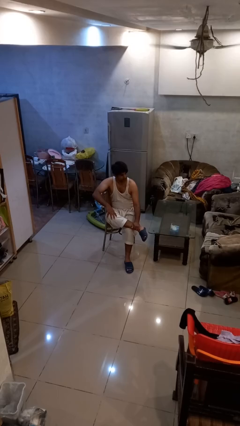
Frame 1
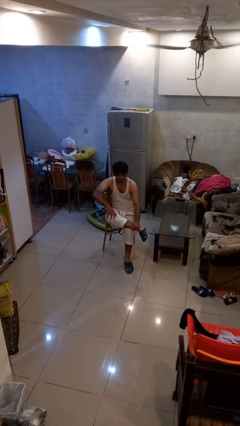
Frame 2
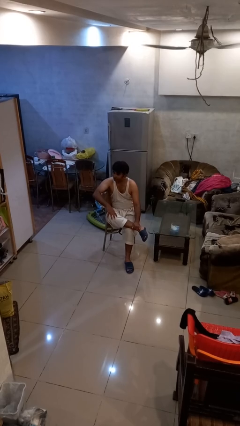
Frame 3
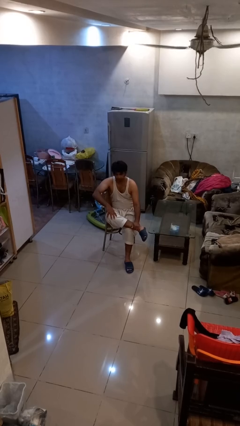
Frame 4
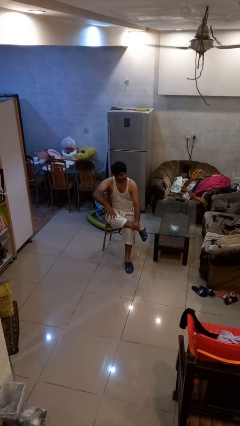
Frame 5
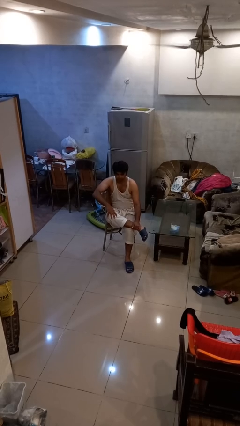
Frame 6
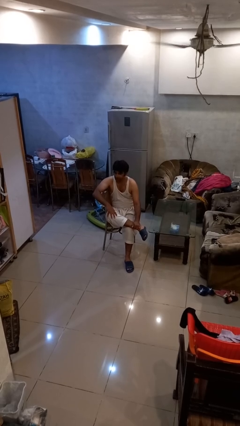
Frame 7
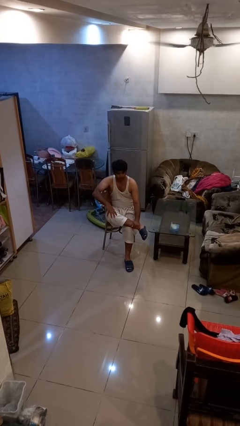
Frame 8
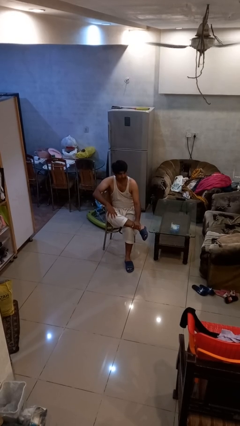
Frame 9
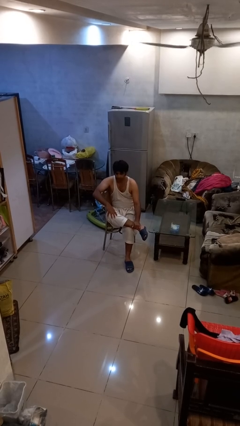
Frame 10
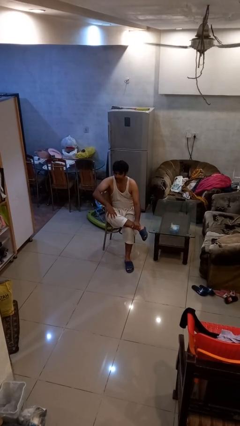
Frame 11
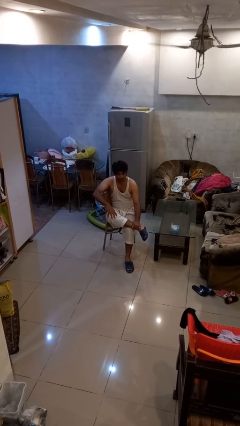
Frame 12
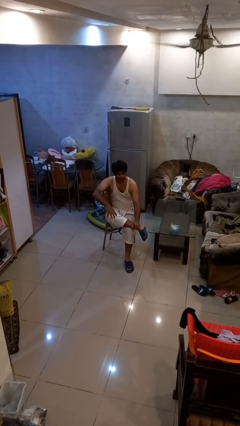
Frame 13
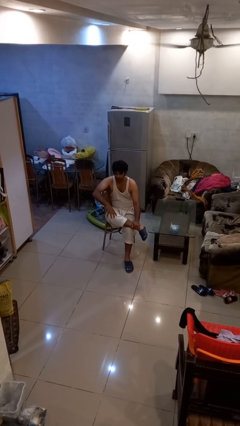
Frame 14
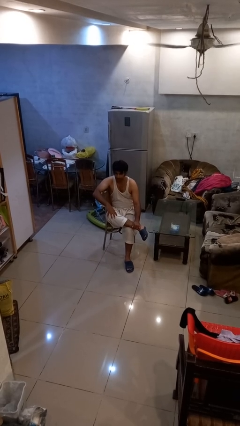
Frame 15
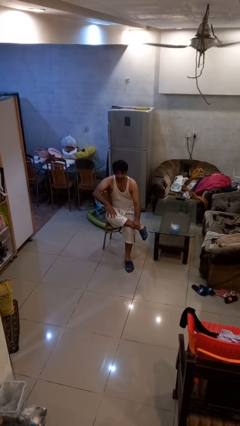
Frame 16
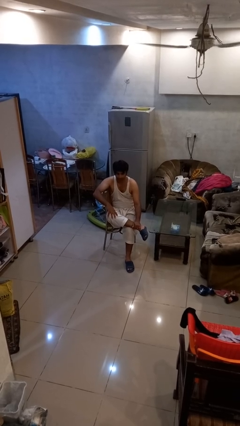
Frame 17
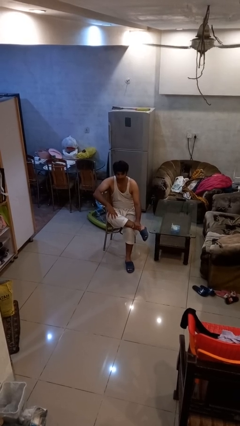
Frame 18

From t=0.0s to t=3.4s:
person shakes head

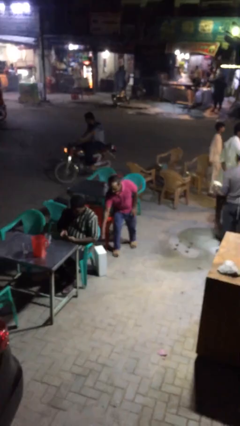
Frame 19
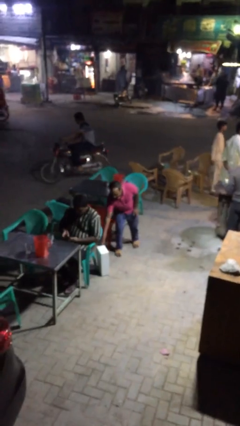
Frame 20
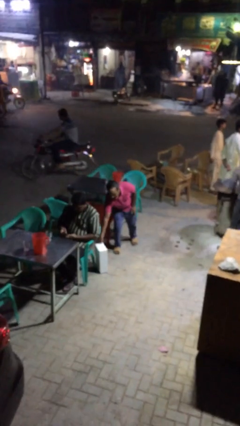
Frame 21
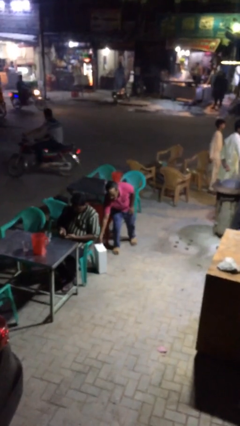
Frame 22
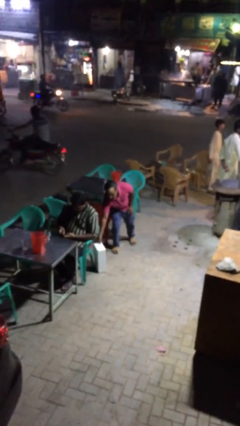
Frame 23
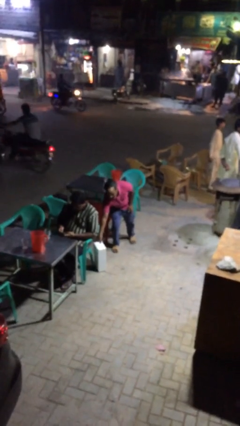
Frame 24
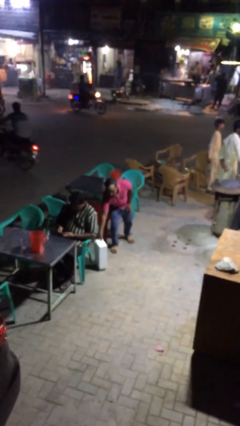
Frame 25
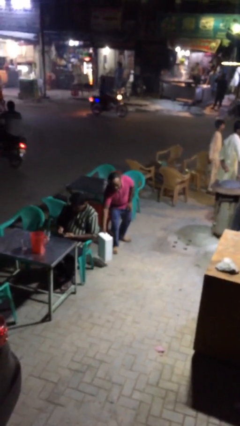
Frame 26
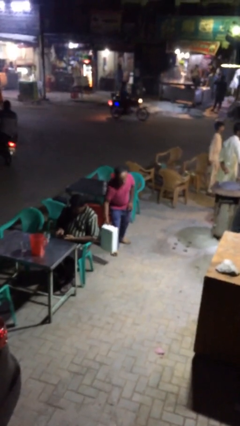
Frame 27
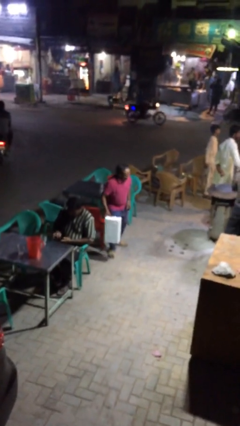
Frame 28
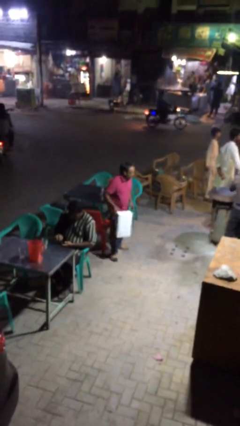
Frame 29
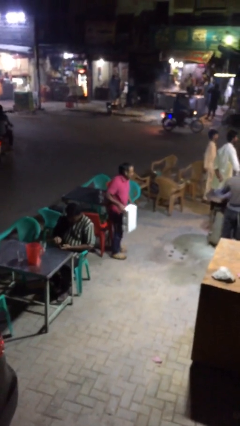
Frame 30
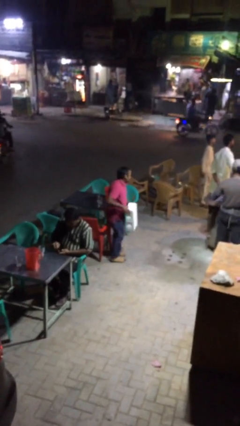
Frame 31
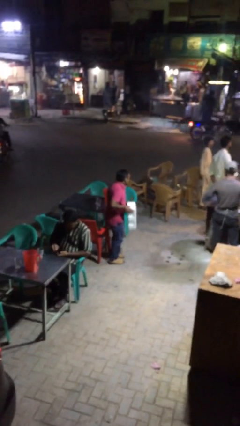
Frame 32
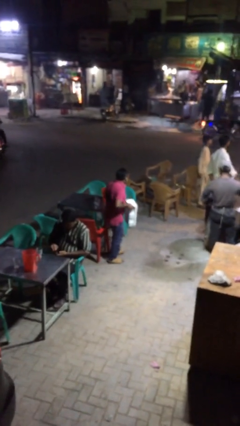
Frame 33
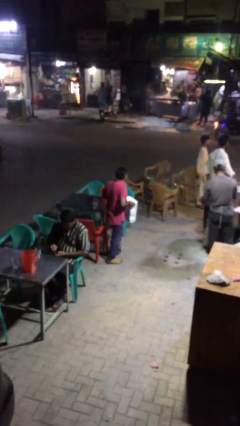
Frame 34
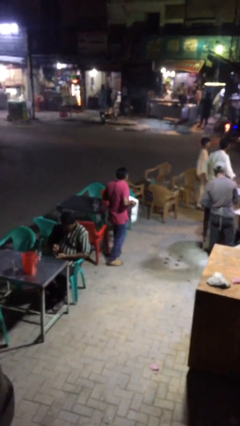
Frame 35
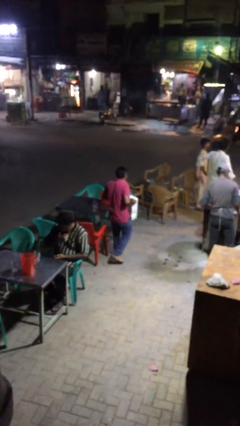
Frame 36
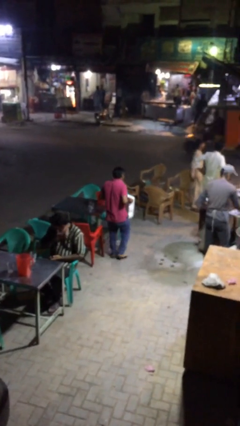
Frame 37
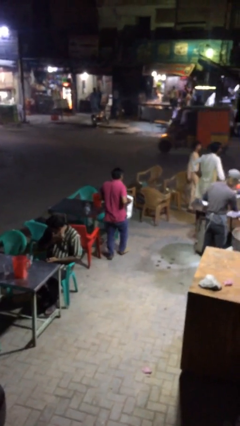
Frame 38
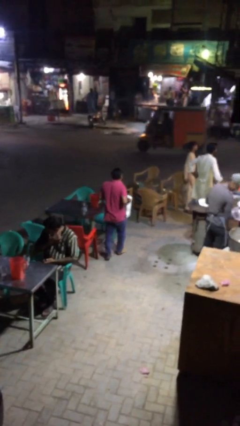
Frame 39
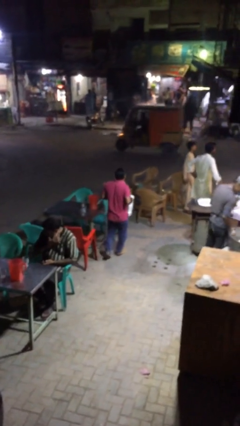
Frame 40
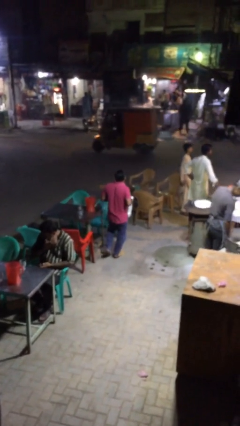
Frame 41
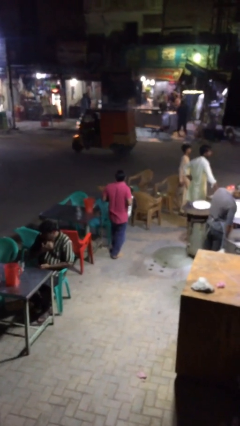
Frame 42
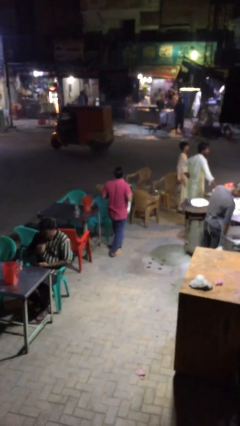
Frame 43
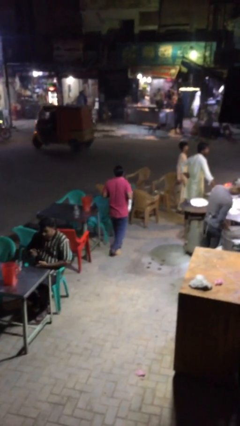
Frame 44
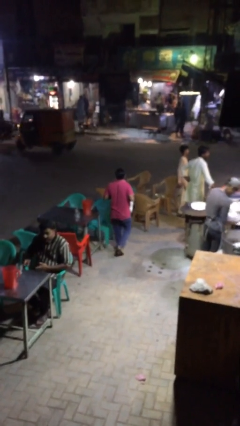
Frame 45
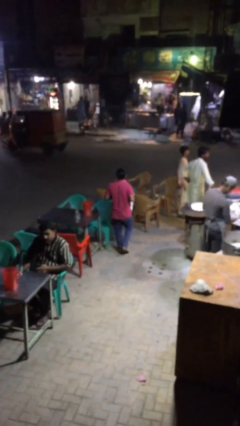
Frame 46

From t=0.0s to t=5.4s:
person steals object from person

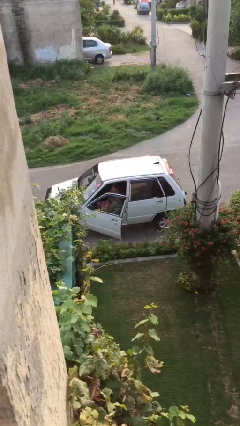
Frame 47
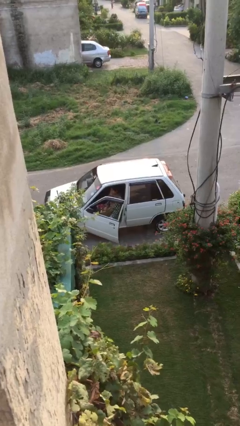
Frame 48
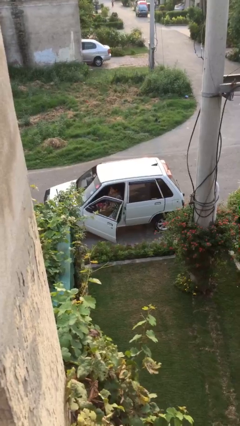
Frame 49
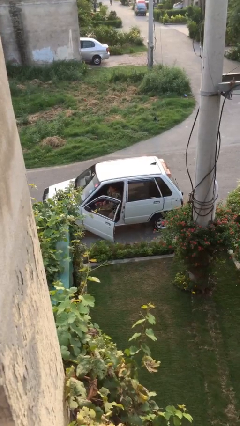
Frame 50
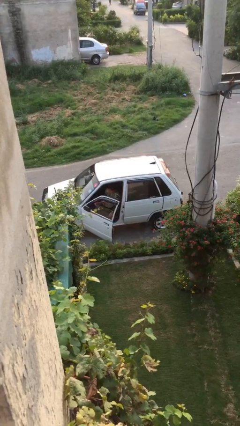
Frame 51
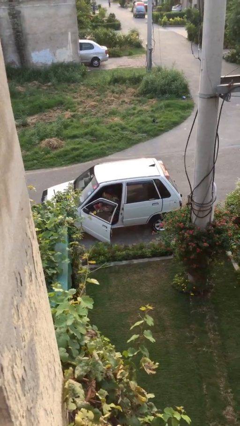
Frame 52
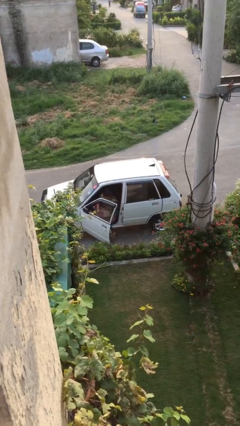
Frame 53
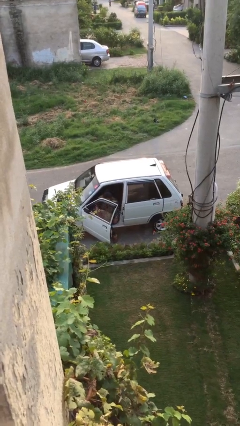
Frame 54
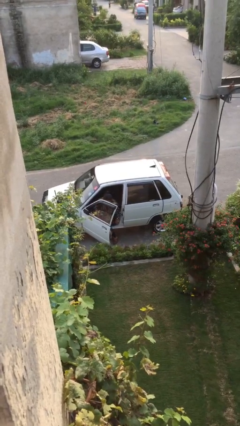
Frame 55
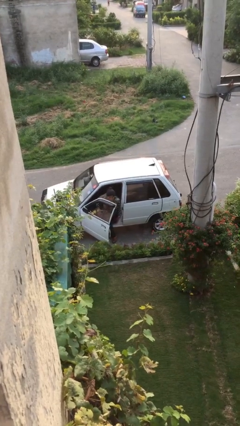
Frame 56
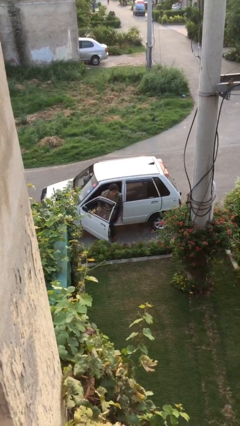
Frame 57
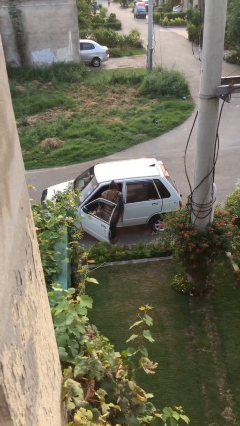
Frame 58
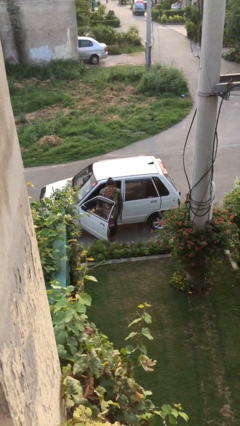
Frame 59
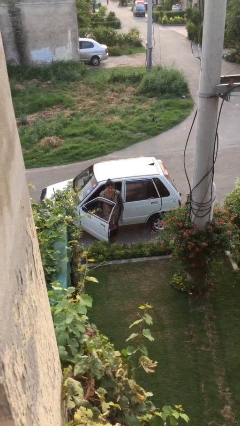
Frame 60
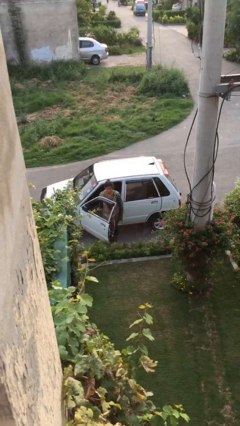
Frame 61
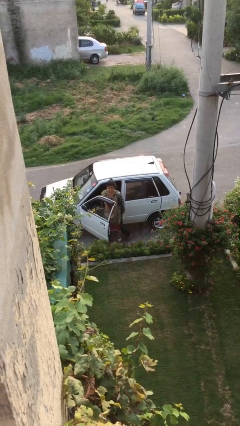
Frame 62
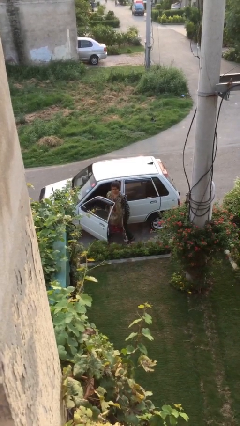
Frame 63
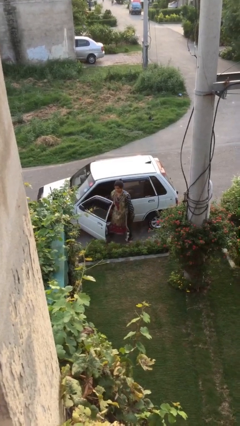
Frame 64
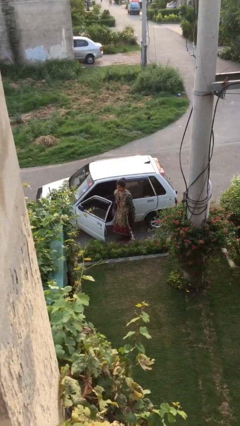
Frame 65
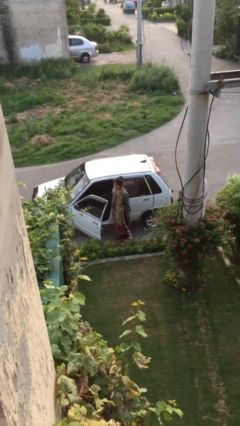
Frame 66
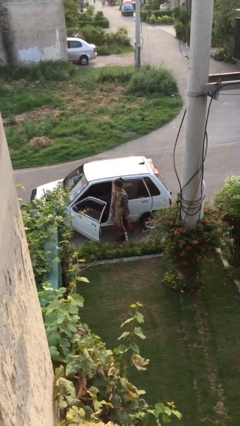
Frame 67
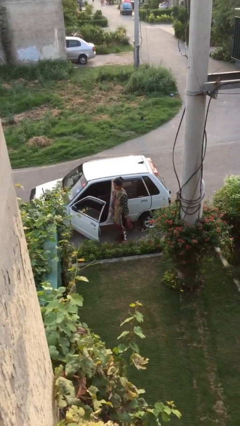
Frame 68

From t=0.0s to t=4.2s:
person exits car

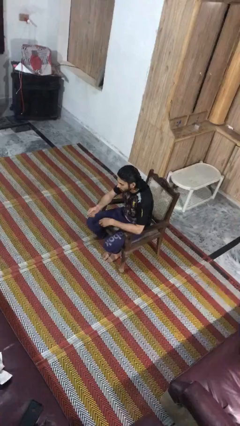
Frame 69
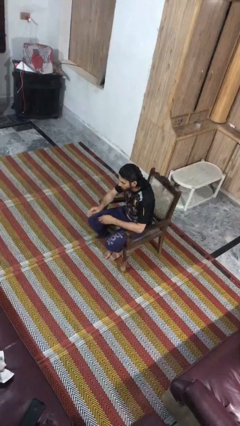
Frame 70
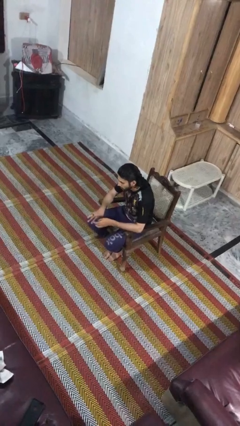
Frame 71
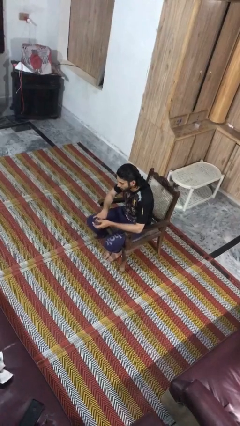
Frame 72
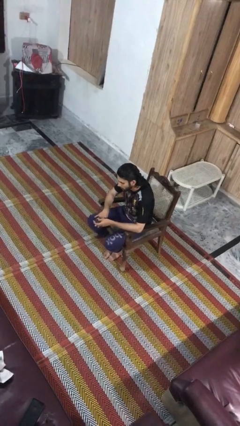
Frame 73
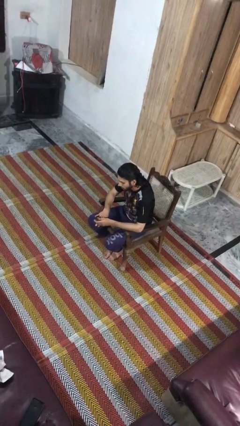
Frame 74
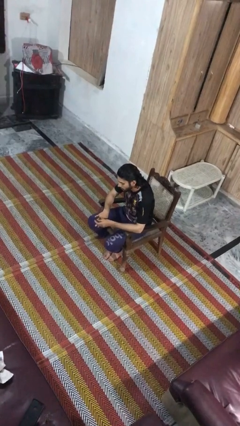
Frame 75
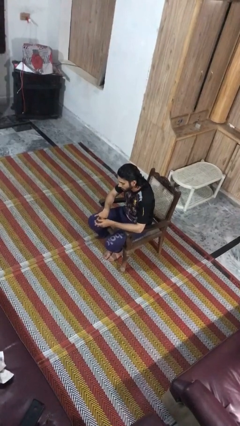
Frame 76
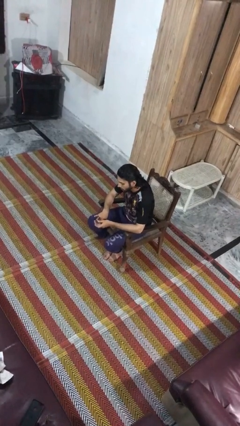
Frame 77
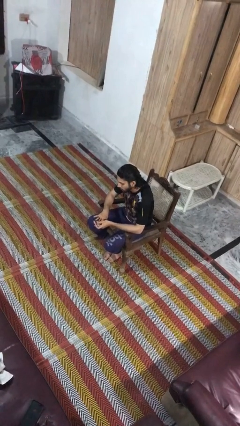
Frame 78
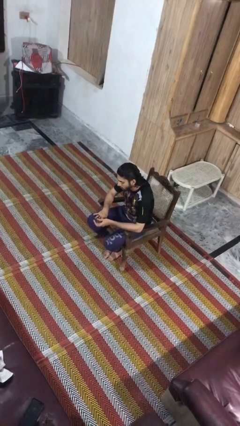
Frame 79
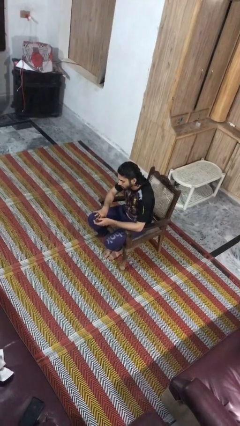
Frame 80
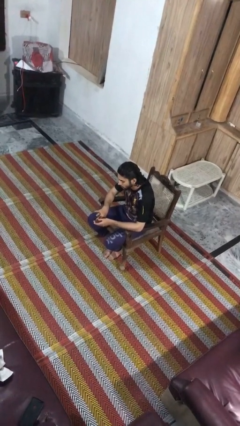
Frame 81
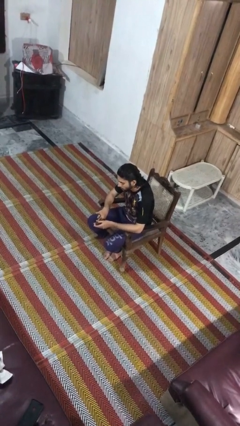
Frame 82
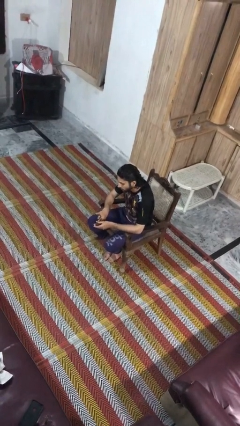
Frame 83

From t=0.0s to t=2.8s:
person clips fingernails

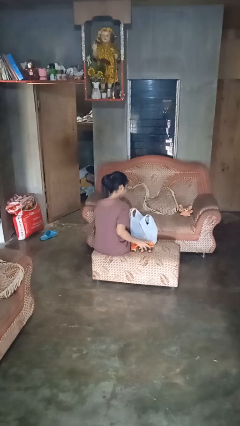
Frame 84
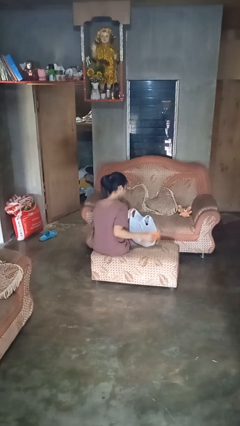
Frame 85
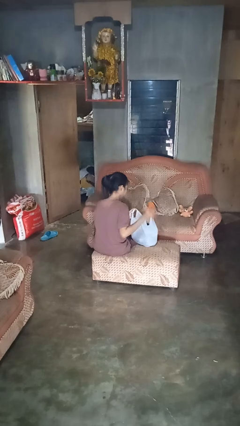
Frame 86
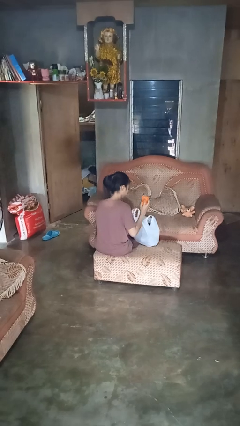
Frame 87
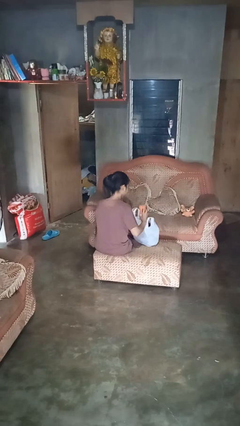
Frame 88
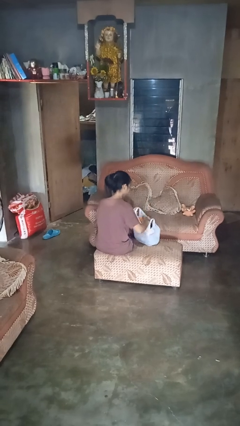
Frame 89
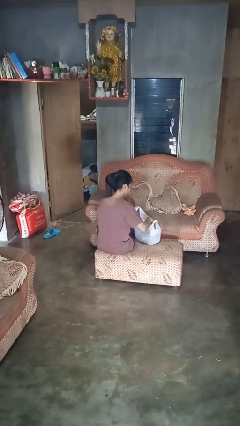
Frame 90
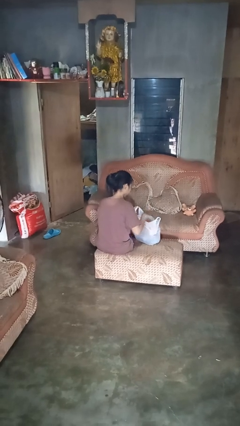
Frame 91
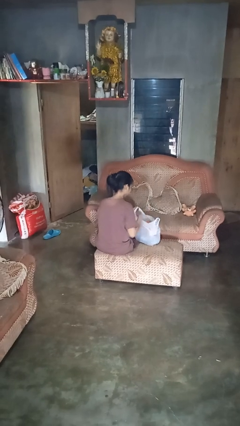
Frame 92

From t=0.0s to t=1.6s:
person puts object into bag
